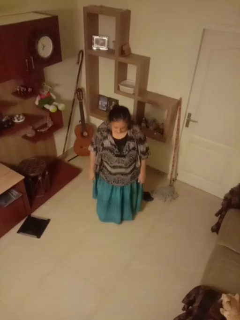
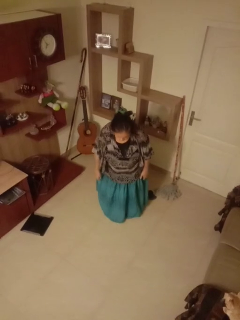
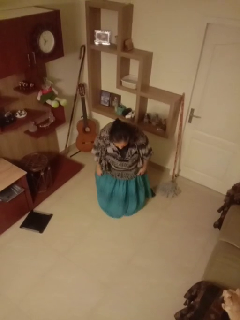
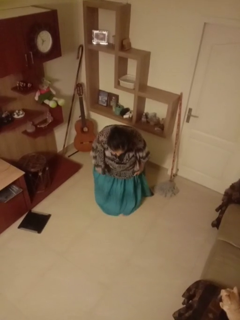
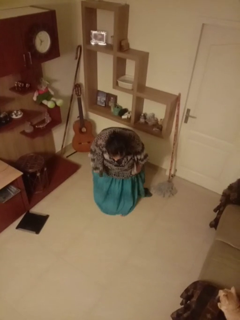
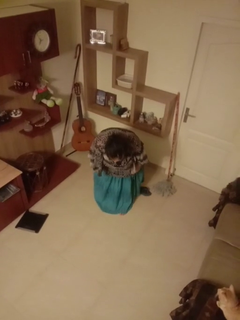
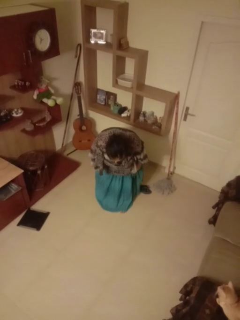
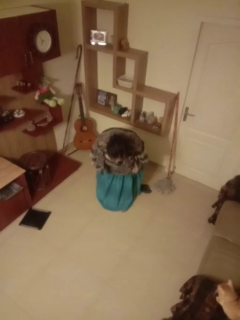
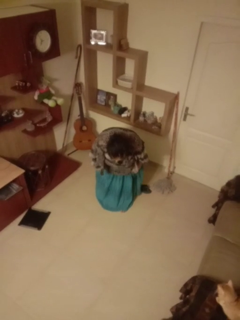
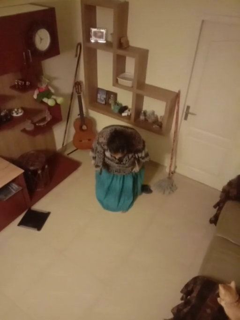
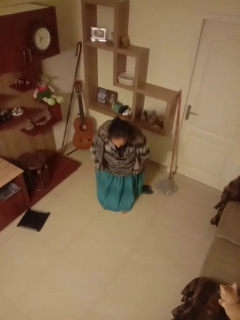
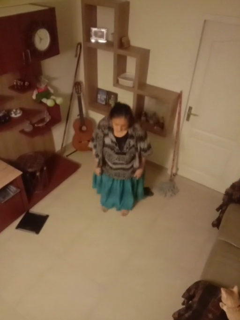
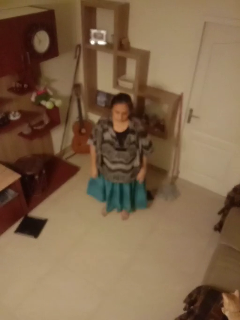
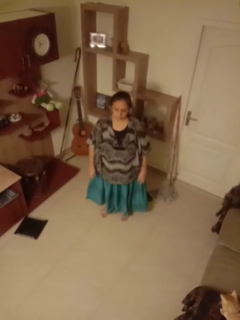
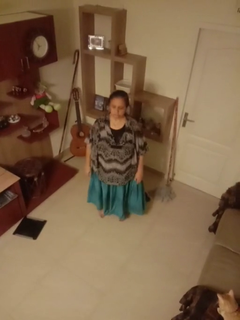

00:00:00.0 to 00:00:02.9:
person bows

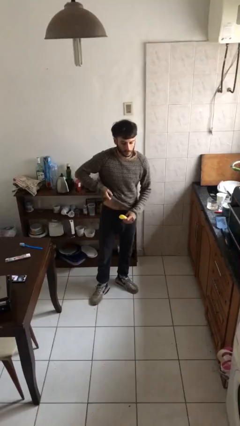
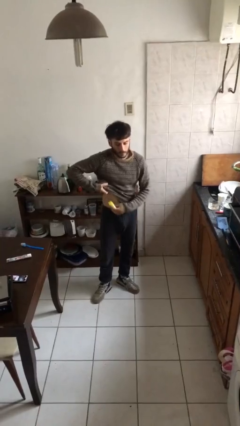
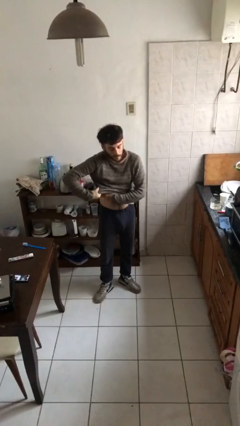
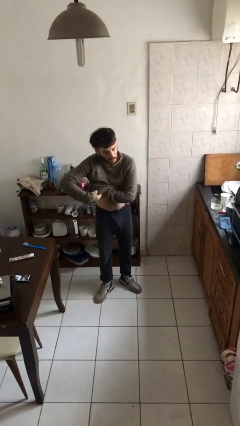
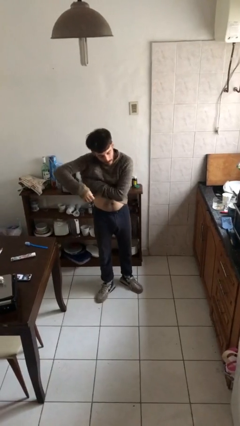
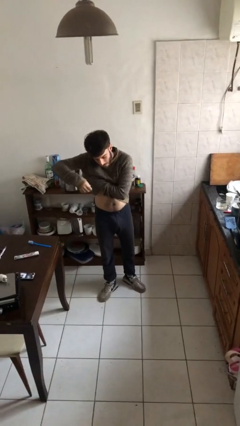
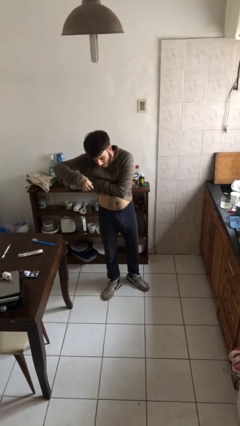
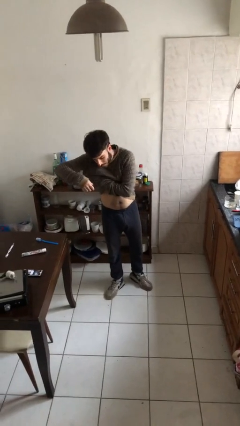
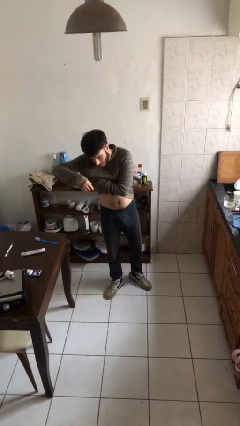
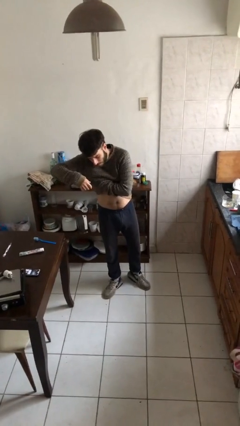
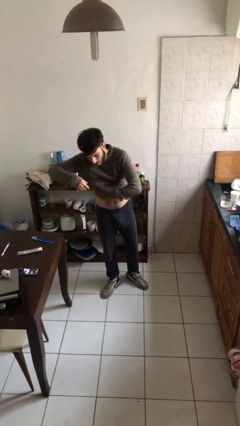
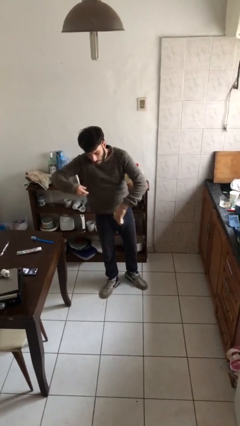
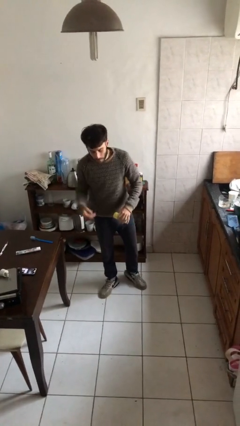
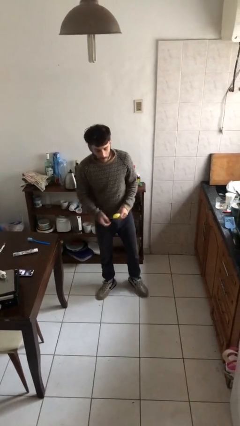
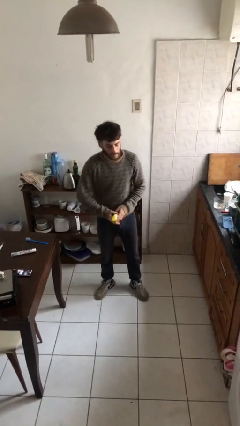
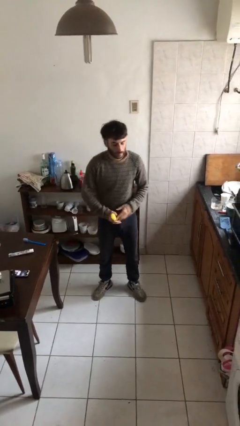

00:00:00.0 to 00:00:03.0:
person applies deodorant

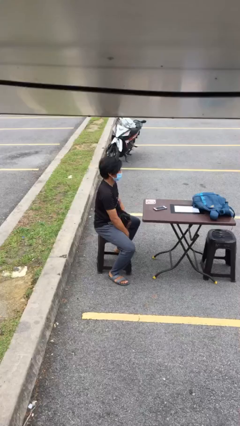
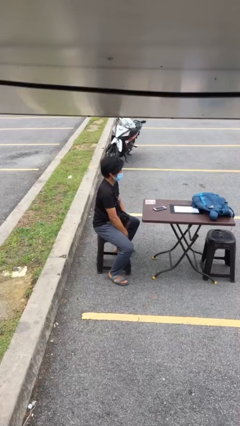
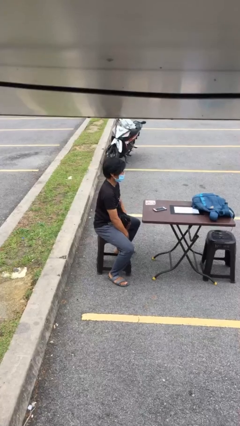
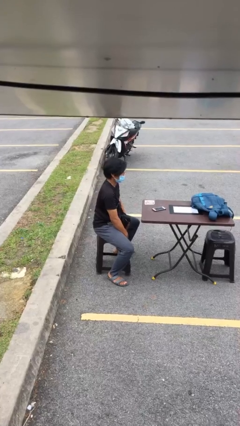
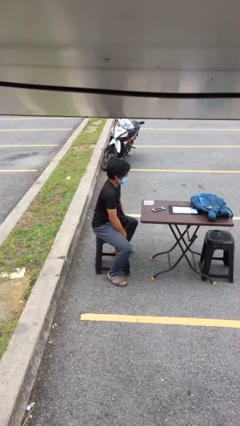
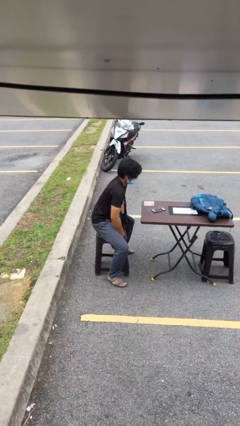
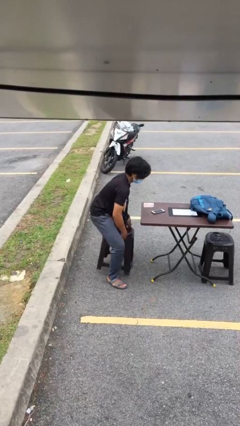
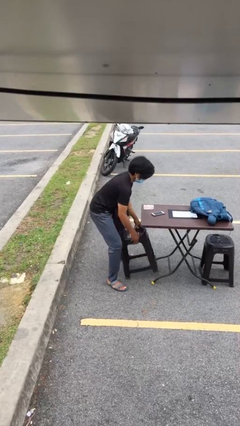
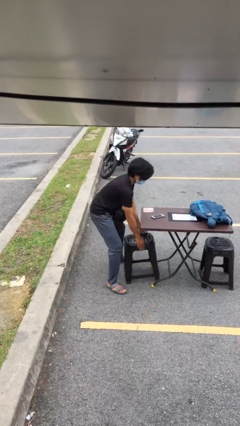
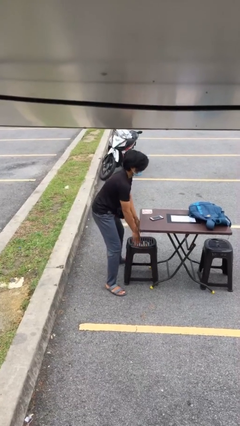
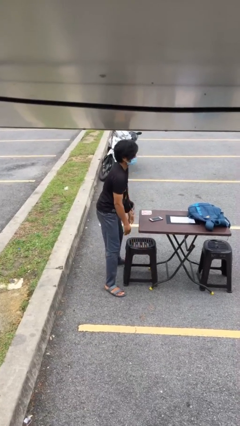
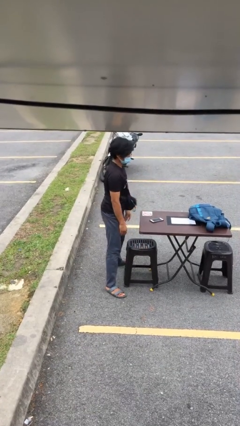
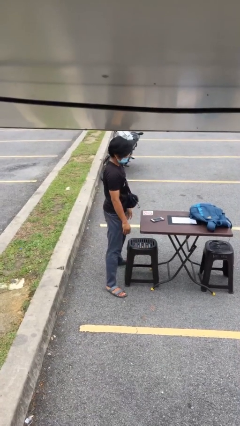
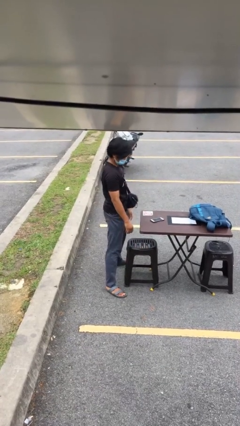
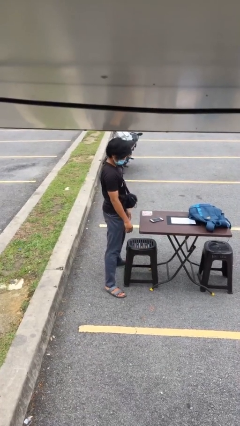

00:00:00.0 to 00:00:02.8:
person stands up

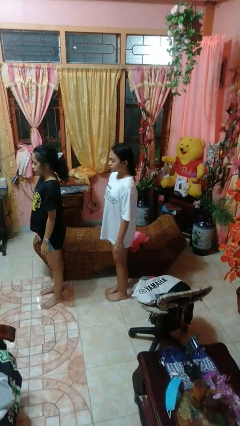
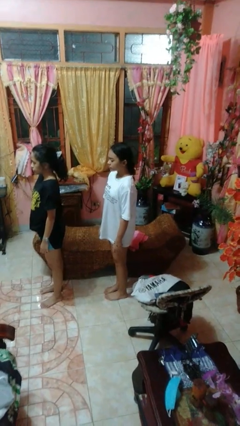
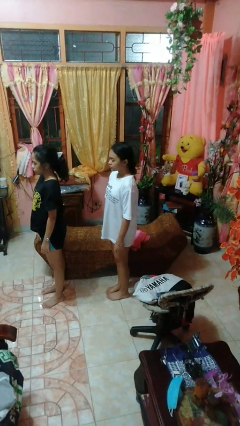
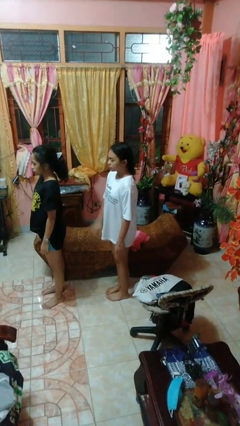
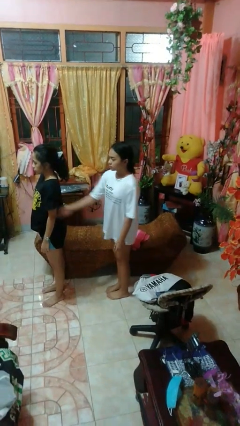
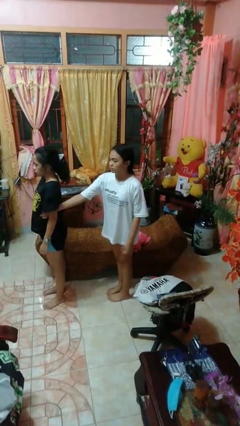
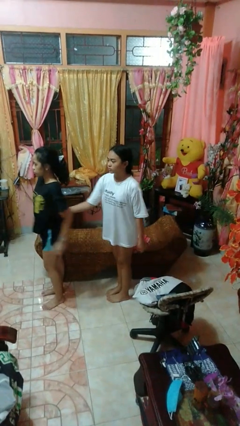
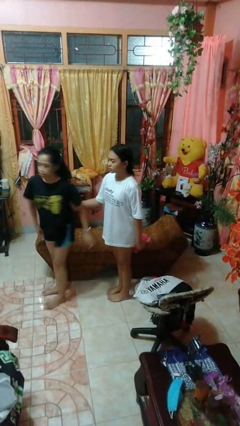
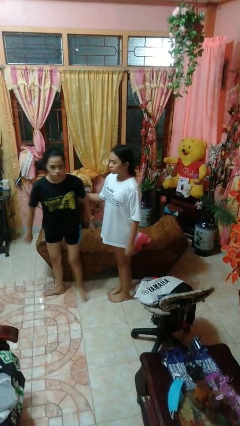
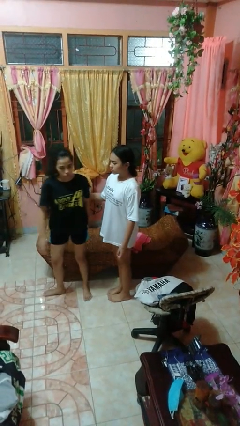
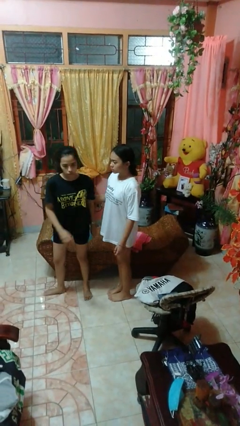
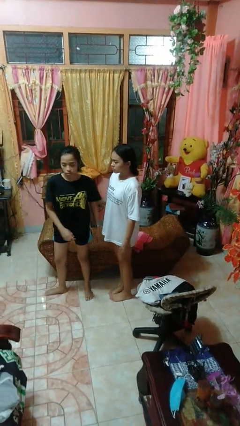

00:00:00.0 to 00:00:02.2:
person grabs person by bicep

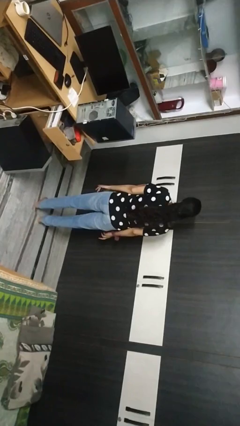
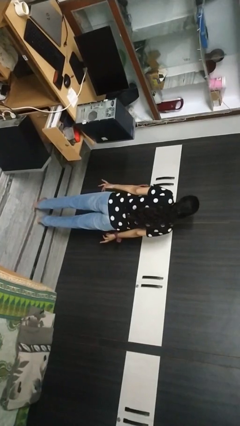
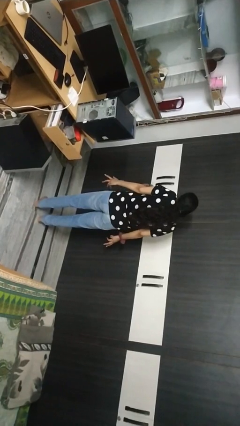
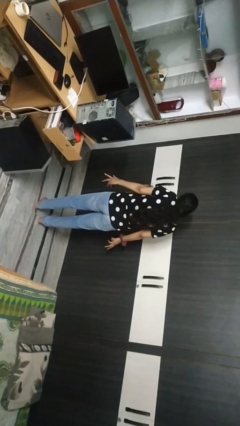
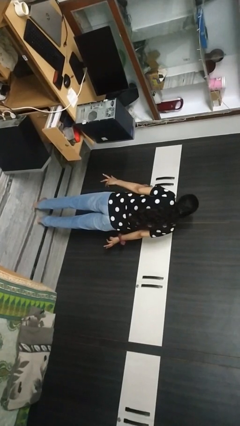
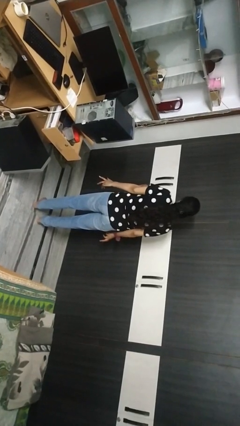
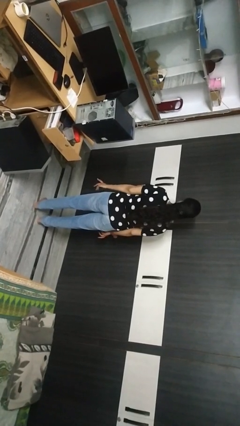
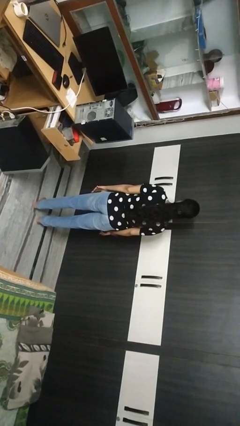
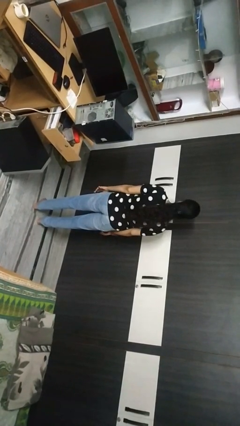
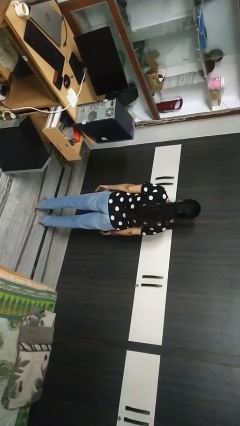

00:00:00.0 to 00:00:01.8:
person shrugs

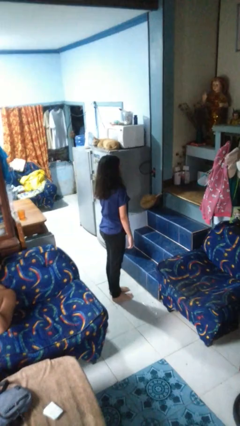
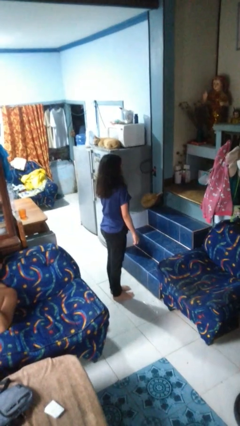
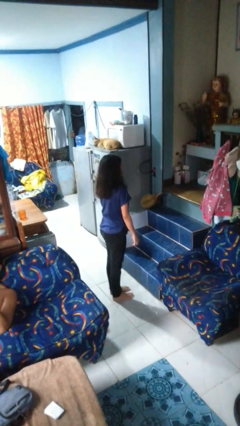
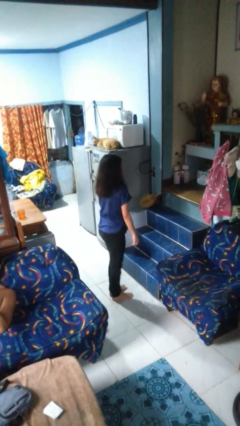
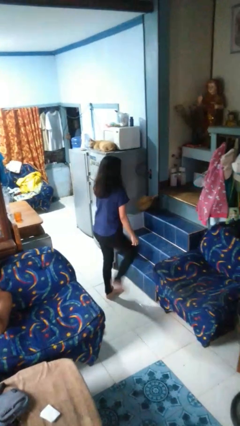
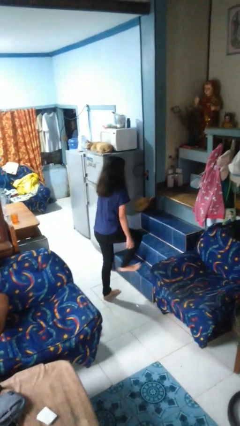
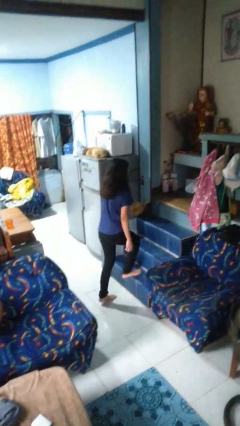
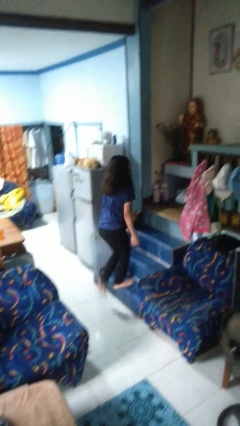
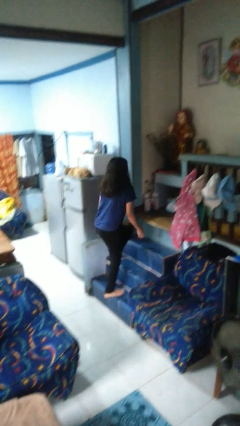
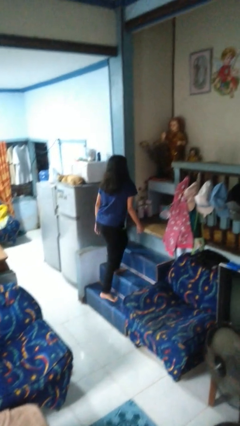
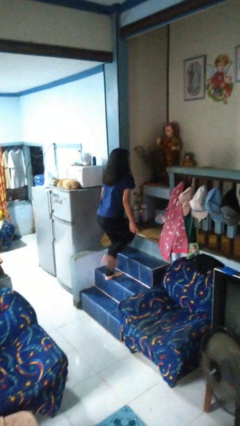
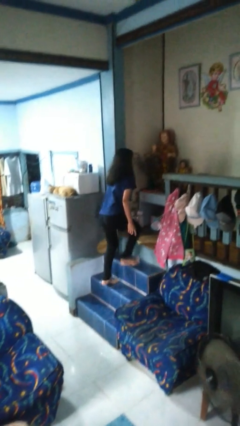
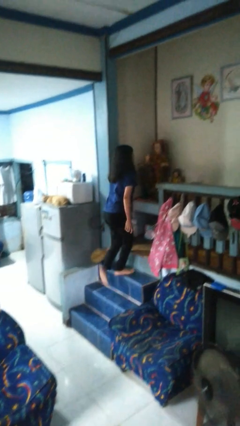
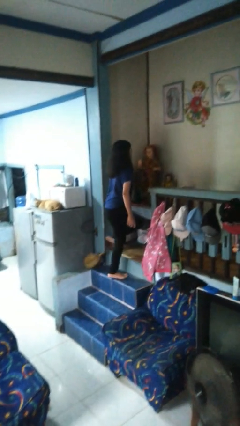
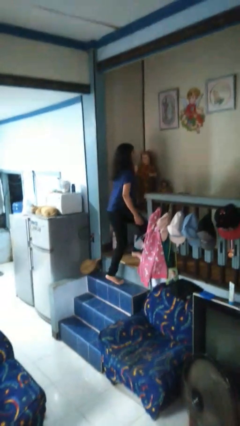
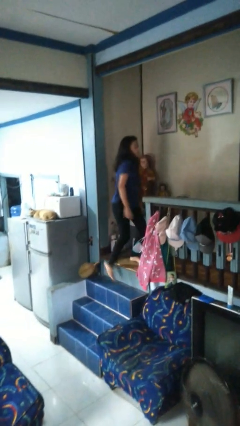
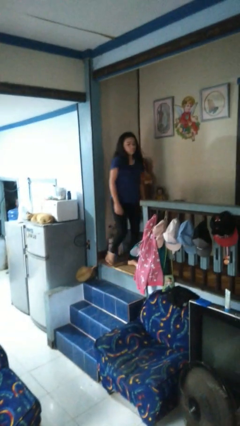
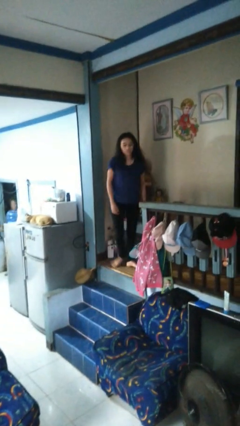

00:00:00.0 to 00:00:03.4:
person climbs up stairs

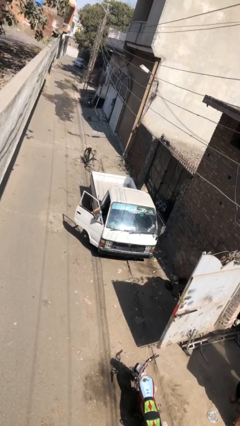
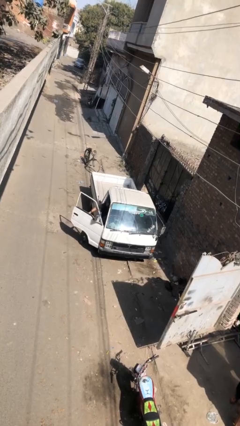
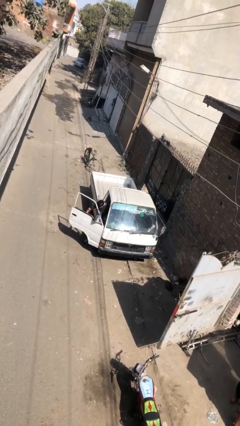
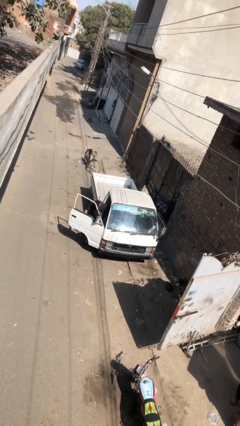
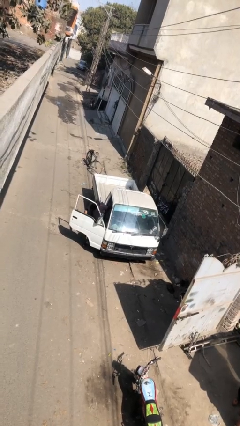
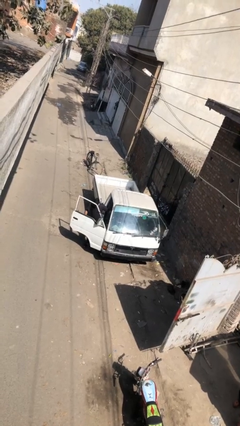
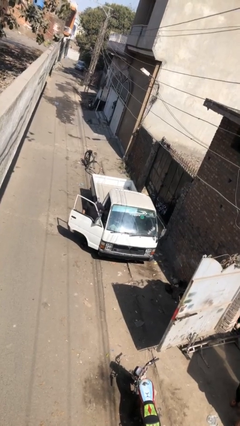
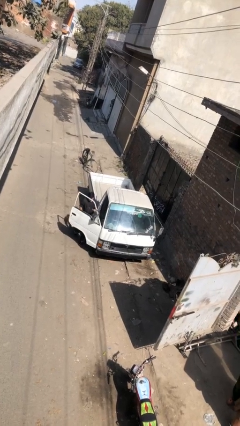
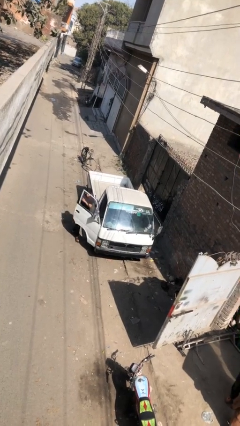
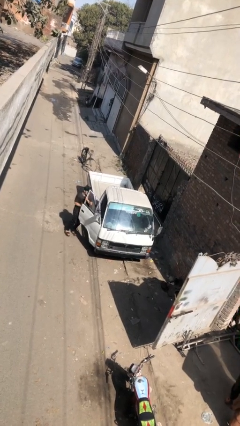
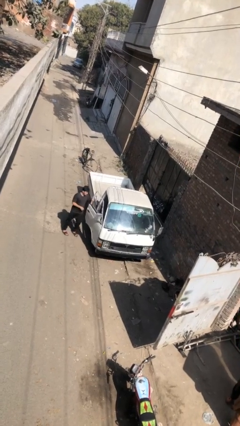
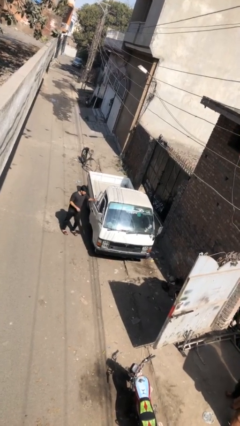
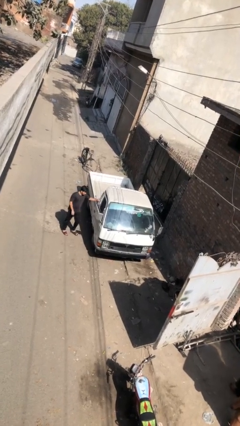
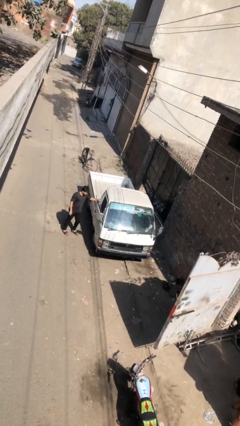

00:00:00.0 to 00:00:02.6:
car drops off person
